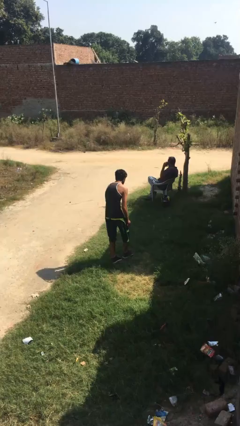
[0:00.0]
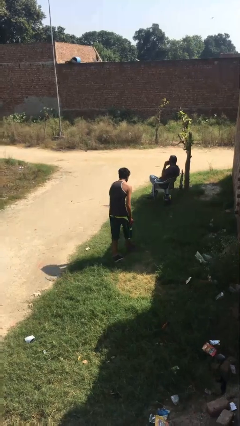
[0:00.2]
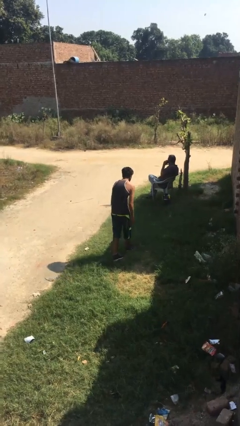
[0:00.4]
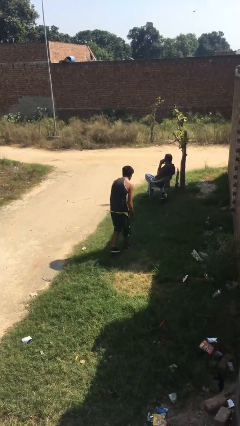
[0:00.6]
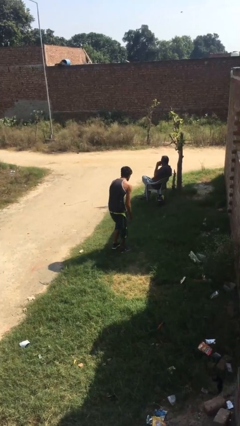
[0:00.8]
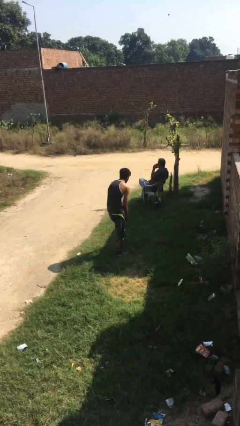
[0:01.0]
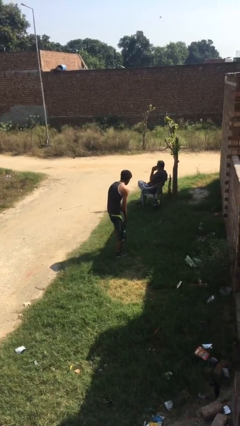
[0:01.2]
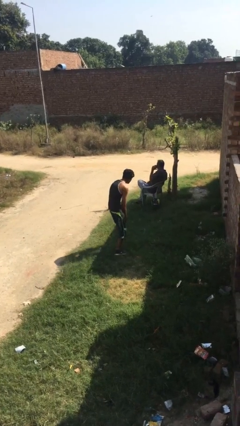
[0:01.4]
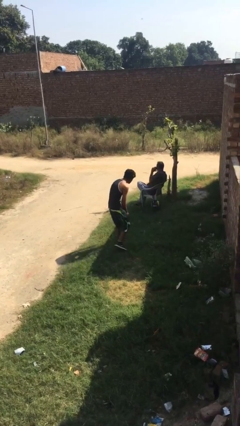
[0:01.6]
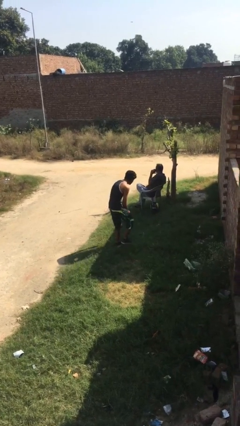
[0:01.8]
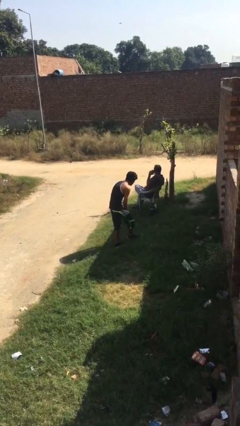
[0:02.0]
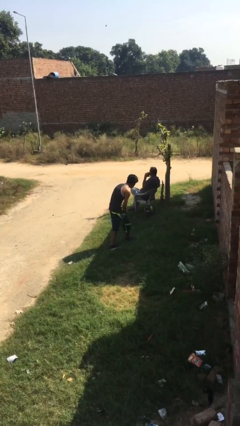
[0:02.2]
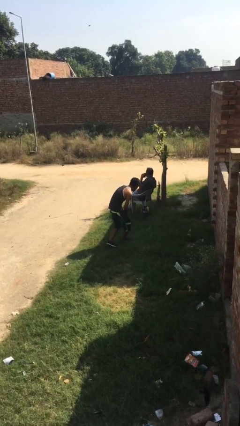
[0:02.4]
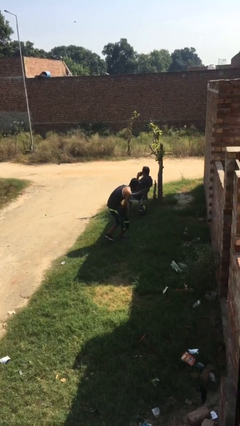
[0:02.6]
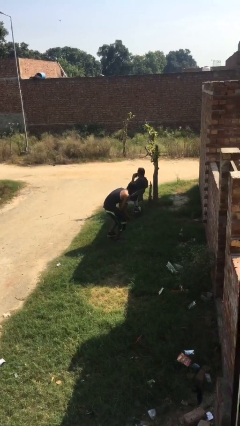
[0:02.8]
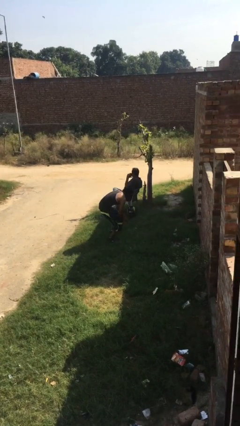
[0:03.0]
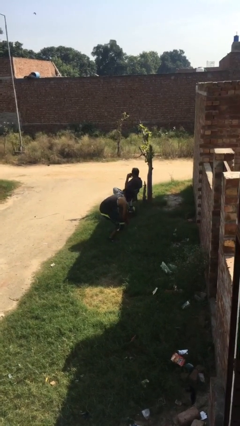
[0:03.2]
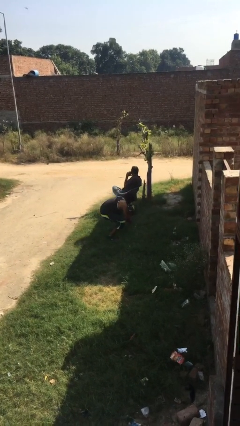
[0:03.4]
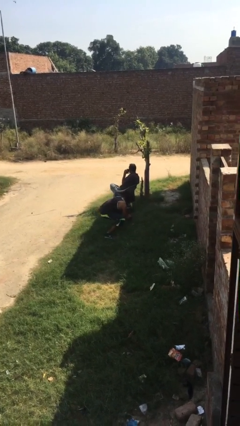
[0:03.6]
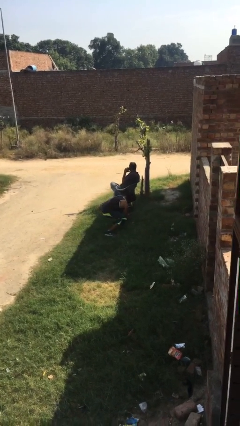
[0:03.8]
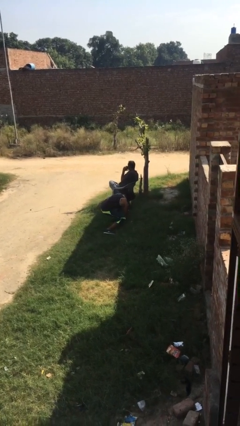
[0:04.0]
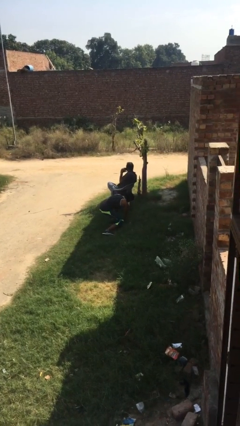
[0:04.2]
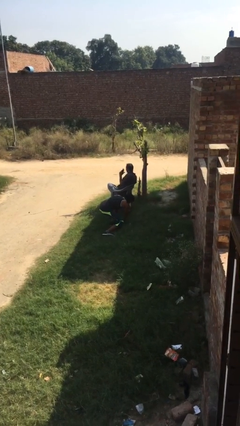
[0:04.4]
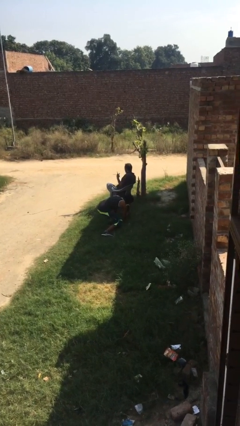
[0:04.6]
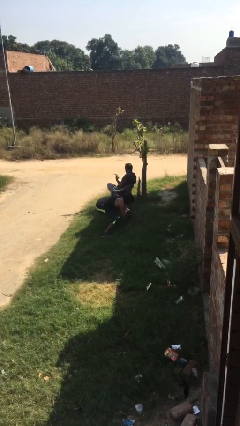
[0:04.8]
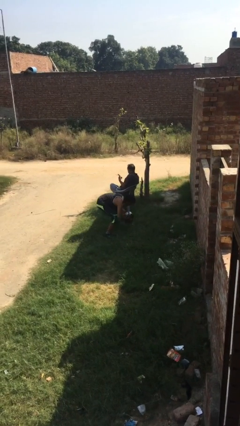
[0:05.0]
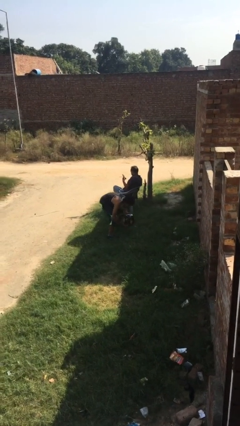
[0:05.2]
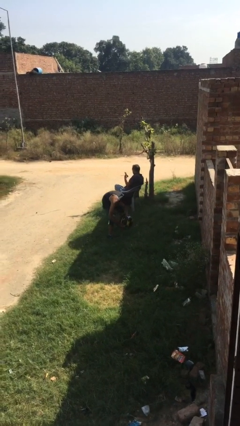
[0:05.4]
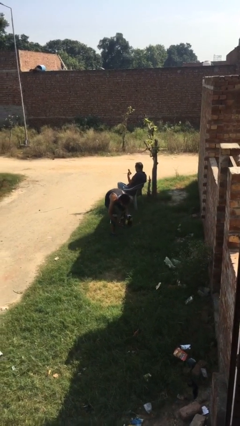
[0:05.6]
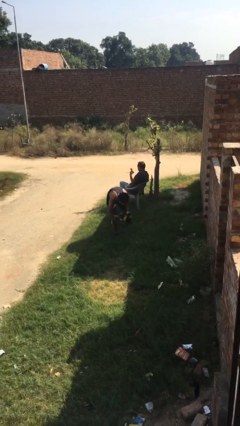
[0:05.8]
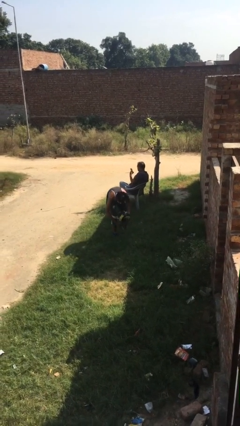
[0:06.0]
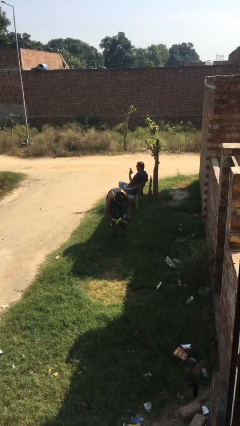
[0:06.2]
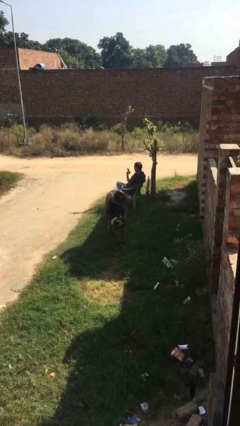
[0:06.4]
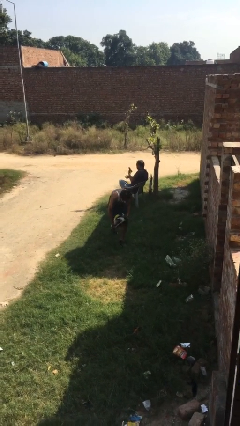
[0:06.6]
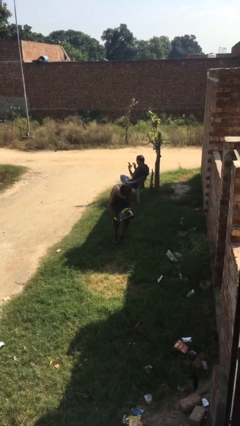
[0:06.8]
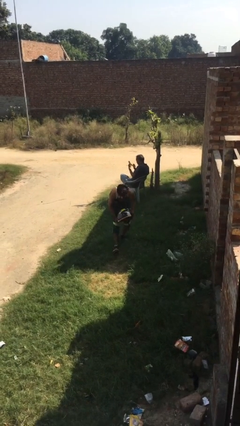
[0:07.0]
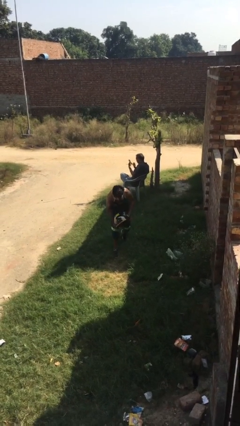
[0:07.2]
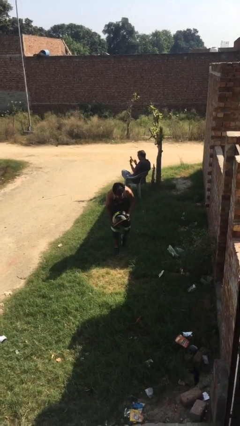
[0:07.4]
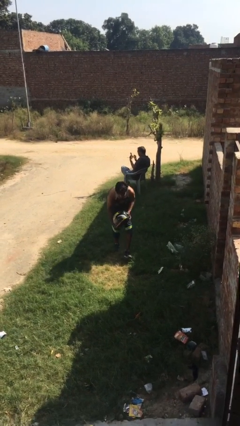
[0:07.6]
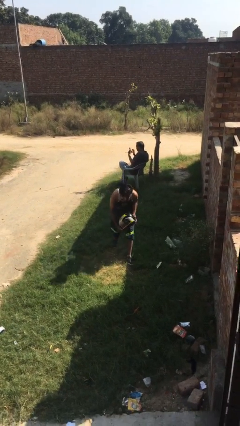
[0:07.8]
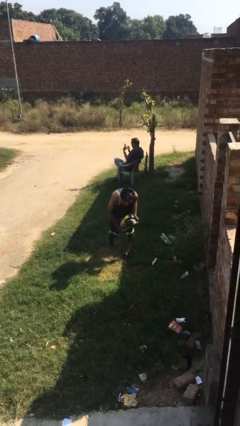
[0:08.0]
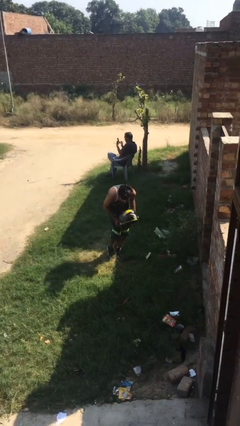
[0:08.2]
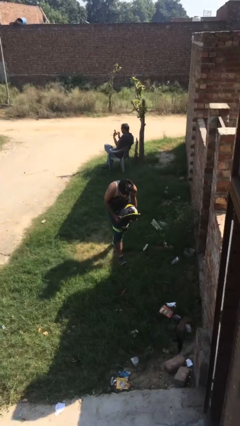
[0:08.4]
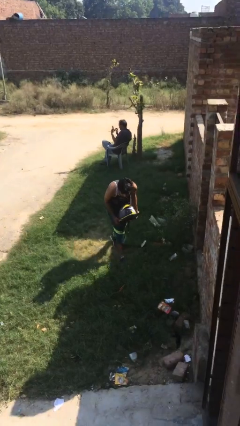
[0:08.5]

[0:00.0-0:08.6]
person steals object from person

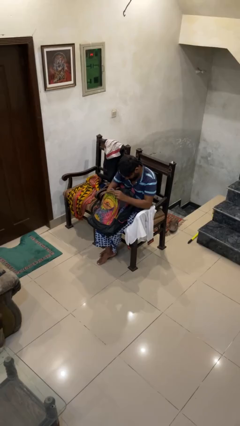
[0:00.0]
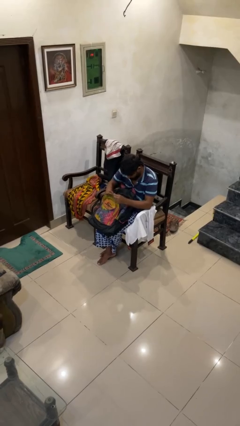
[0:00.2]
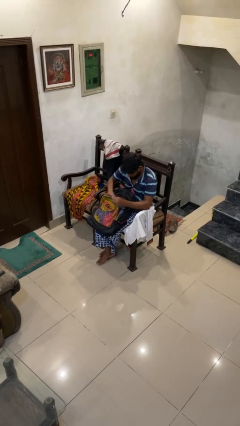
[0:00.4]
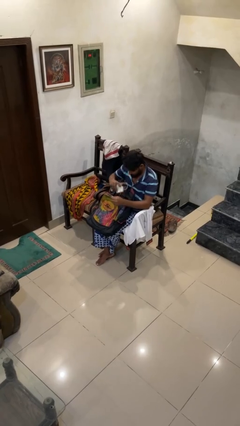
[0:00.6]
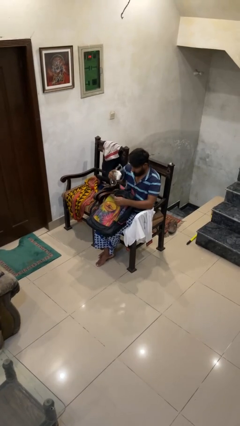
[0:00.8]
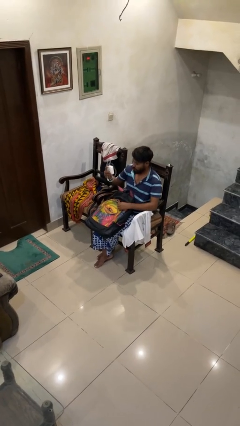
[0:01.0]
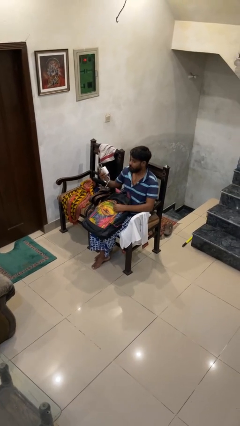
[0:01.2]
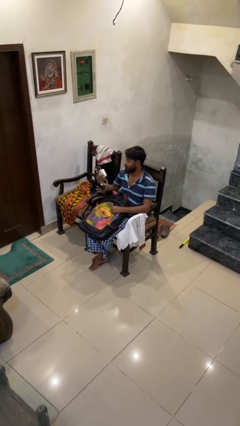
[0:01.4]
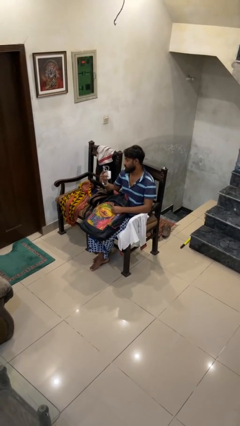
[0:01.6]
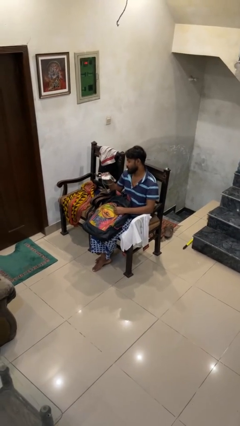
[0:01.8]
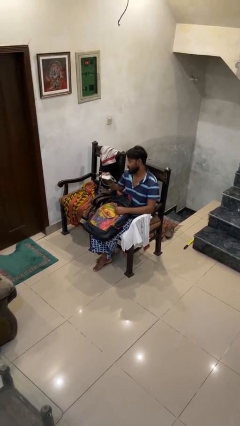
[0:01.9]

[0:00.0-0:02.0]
person takes object from backpack

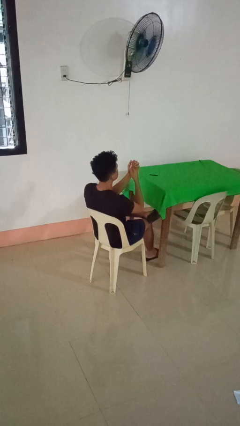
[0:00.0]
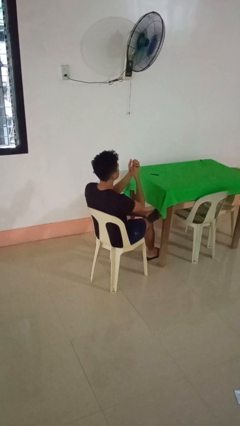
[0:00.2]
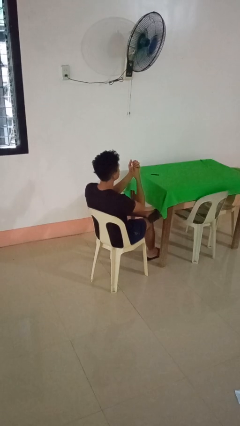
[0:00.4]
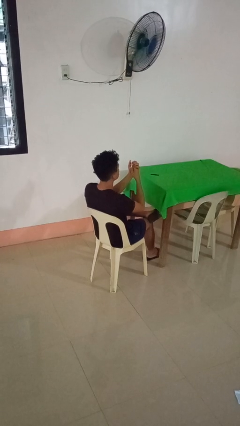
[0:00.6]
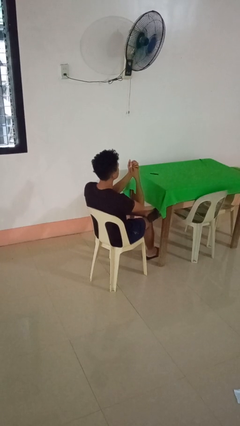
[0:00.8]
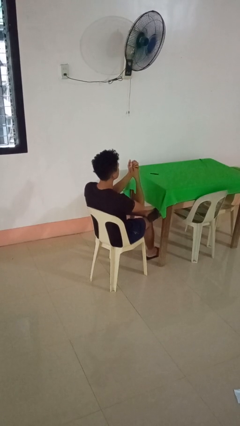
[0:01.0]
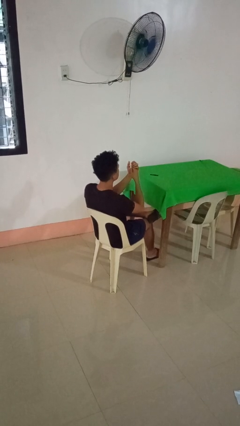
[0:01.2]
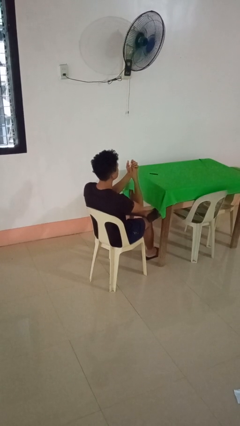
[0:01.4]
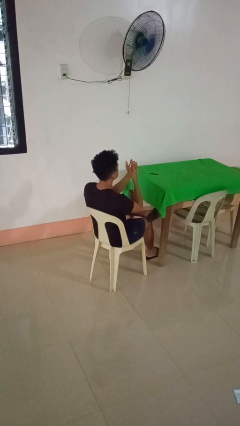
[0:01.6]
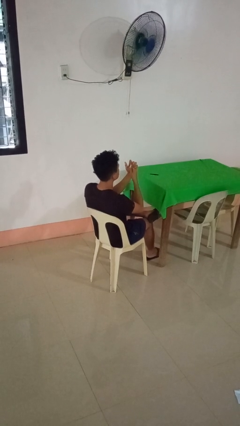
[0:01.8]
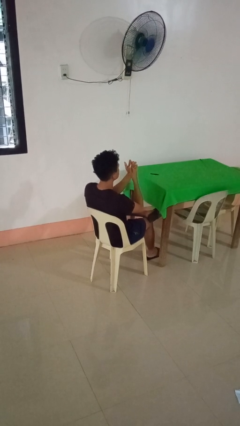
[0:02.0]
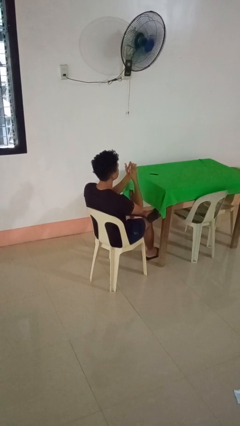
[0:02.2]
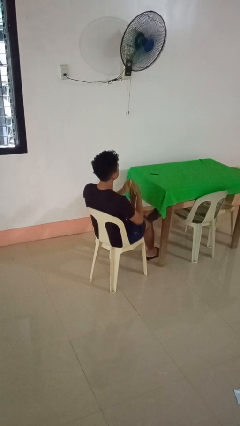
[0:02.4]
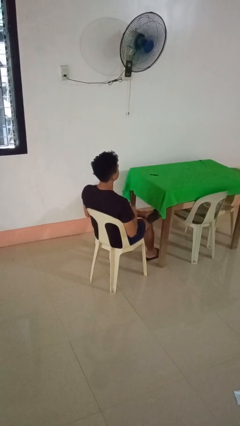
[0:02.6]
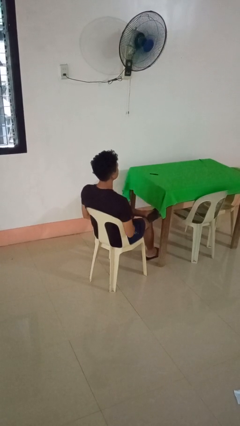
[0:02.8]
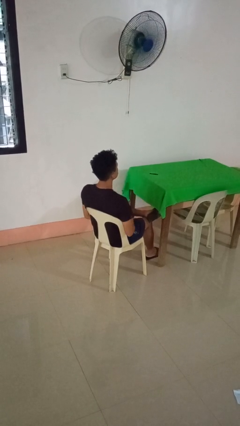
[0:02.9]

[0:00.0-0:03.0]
person clips fingernails

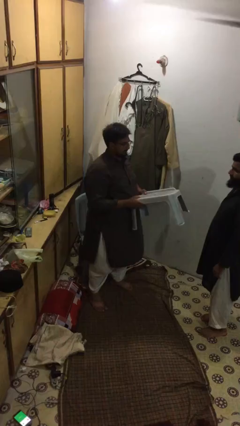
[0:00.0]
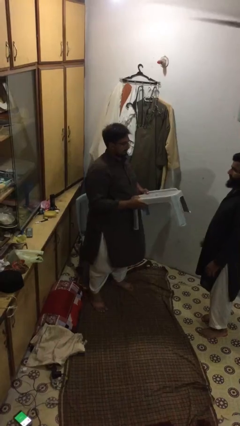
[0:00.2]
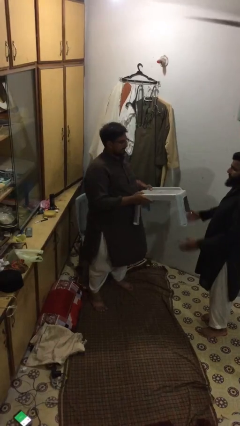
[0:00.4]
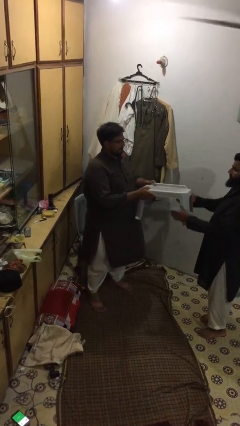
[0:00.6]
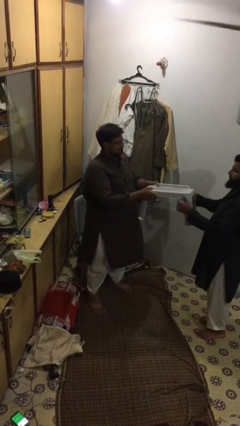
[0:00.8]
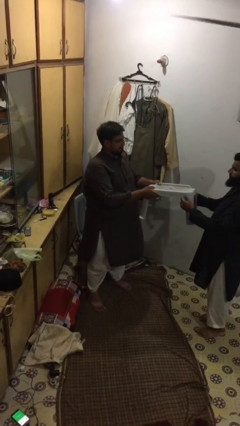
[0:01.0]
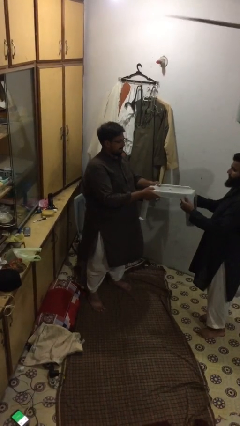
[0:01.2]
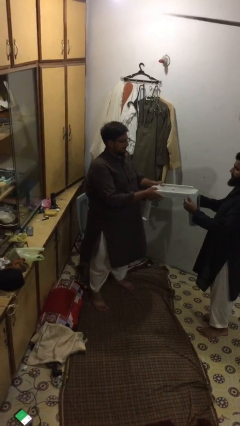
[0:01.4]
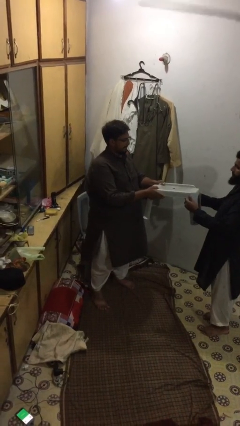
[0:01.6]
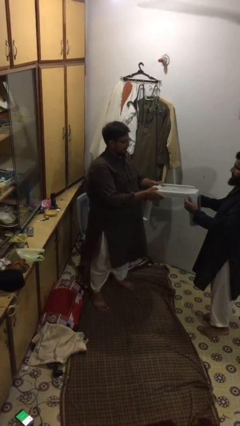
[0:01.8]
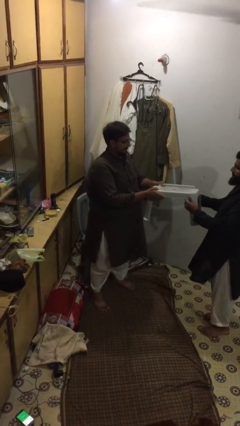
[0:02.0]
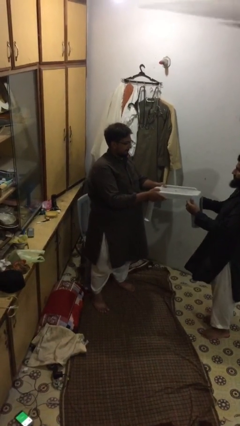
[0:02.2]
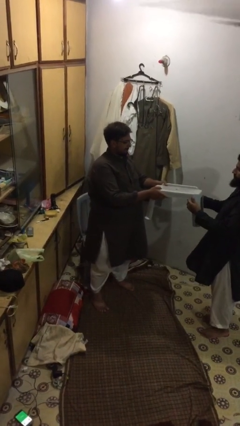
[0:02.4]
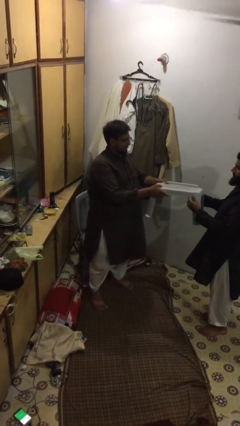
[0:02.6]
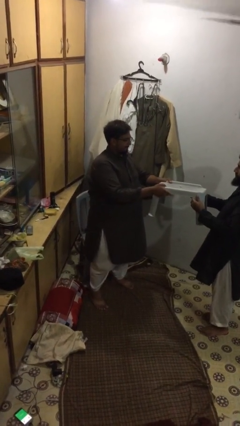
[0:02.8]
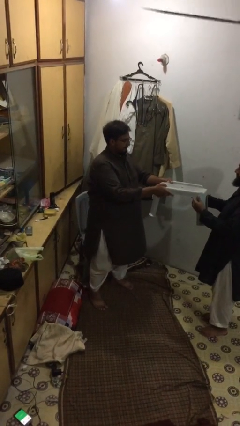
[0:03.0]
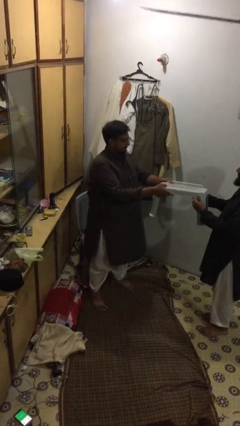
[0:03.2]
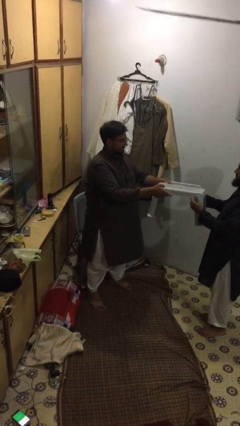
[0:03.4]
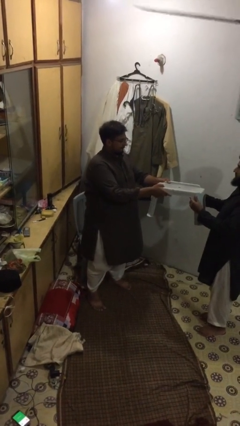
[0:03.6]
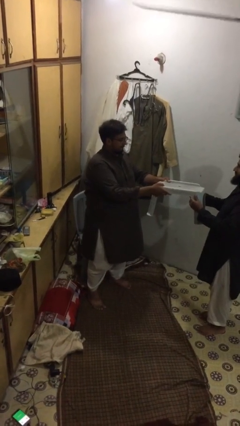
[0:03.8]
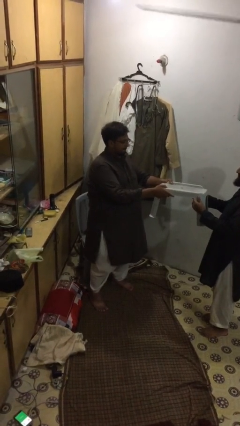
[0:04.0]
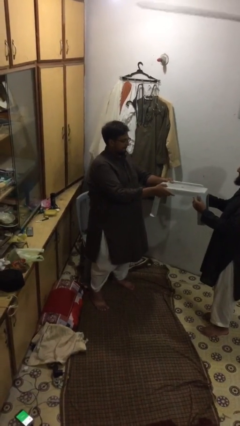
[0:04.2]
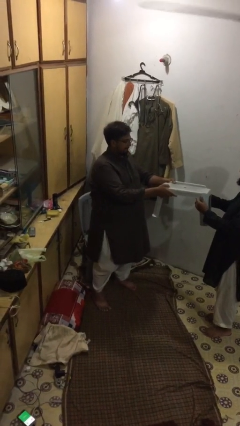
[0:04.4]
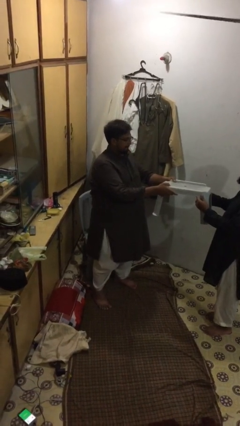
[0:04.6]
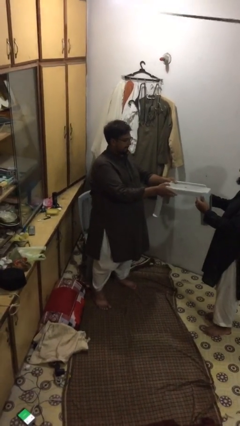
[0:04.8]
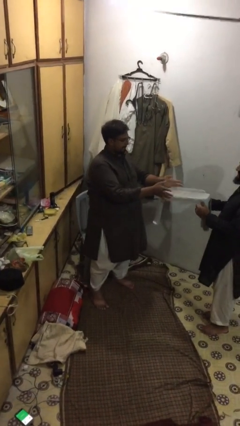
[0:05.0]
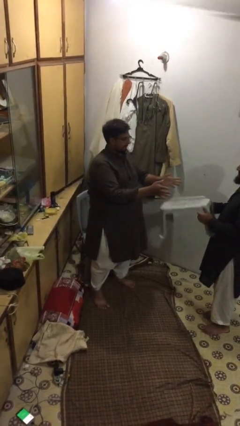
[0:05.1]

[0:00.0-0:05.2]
person transfers object to person
